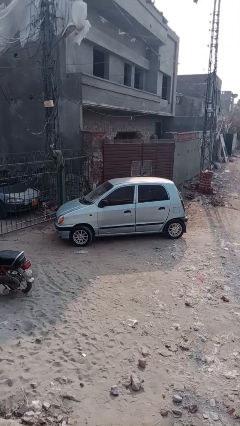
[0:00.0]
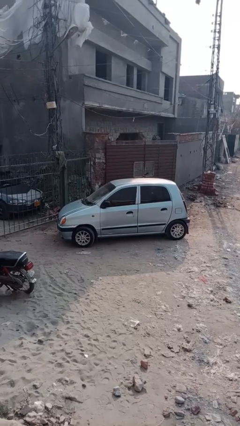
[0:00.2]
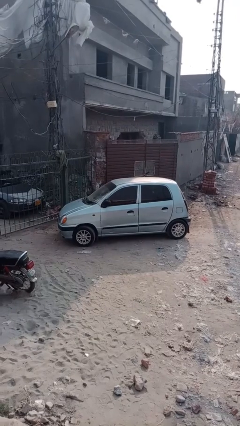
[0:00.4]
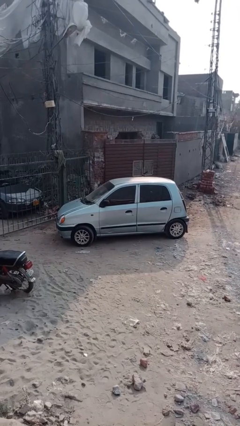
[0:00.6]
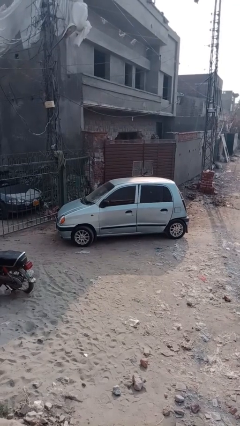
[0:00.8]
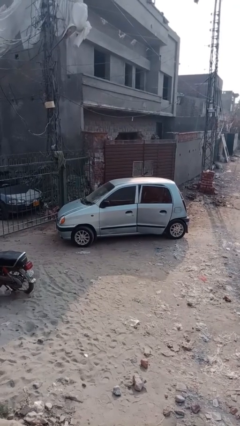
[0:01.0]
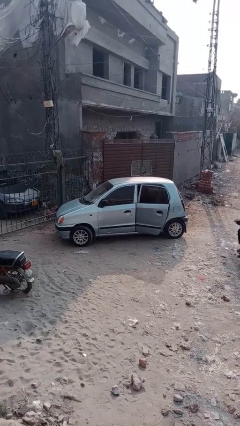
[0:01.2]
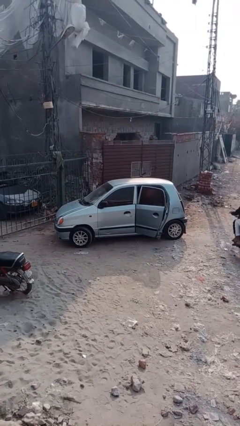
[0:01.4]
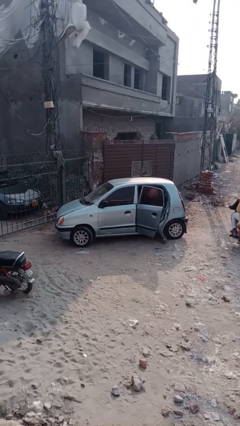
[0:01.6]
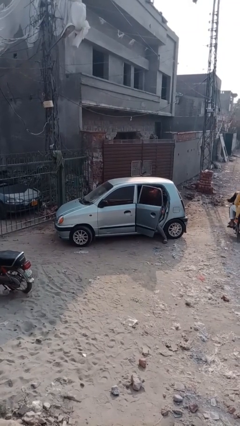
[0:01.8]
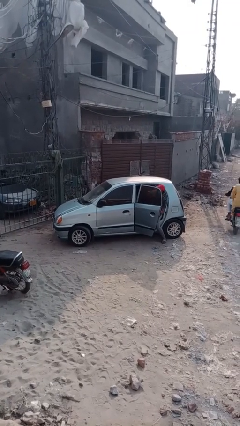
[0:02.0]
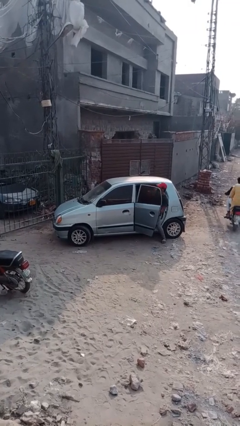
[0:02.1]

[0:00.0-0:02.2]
car drops off person

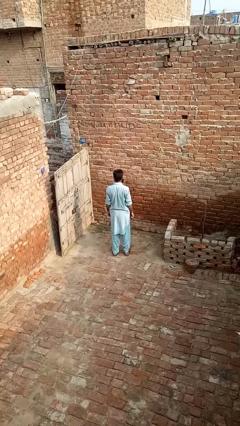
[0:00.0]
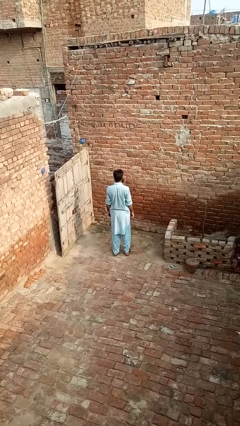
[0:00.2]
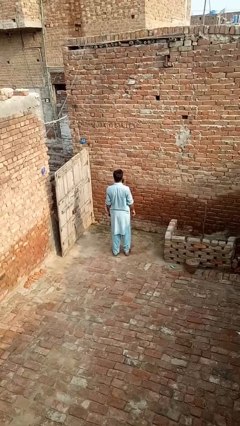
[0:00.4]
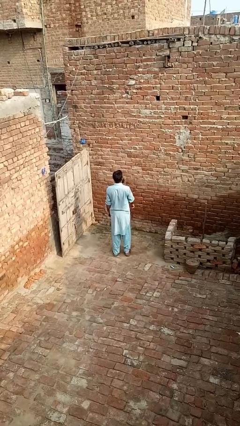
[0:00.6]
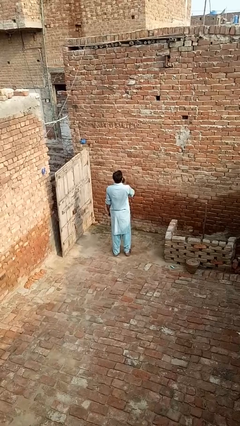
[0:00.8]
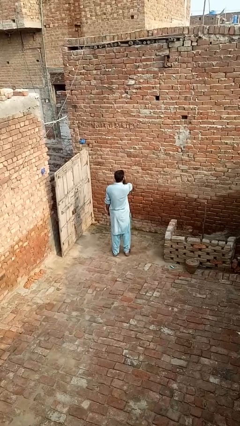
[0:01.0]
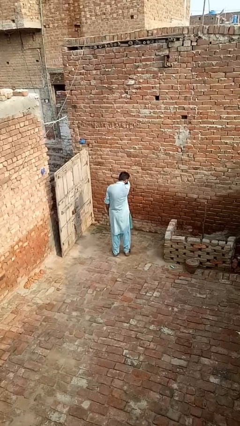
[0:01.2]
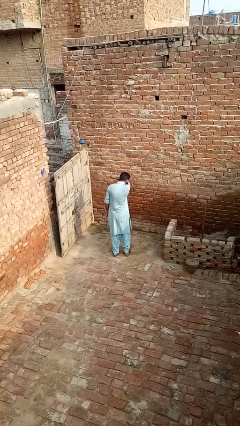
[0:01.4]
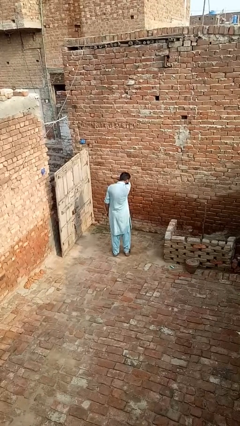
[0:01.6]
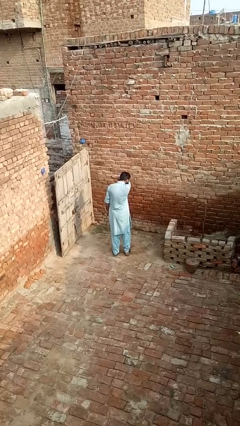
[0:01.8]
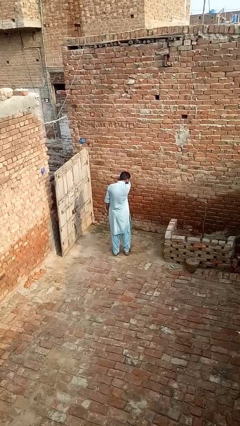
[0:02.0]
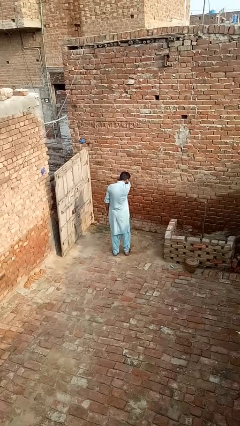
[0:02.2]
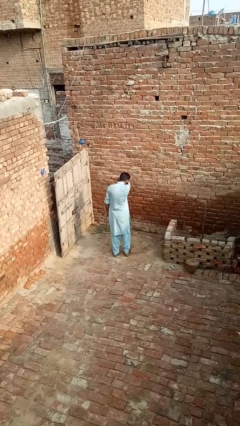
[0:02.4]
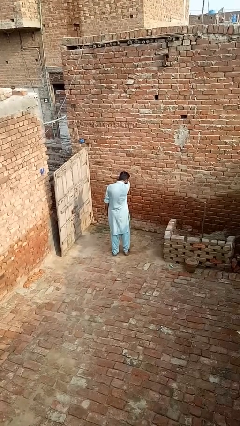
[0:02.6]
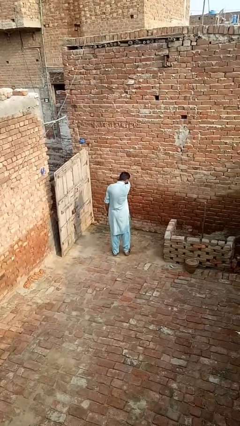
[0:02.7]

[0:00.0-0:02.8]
person sneezes into arm

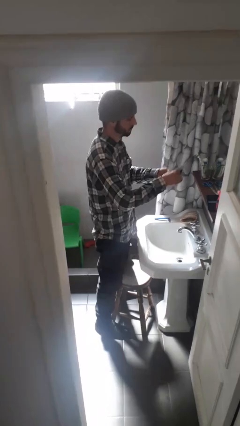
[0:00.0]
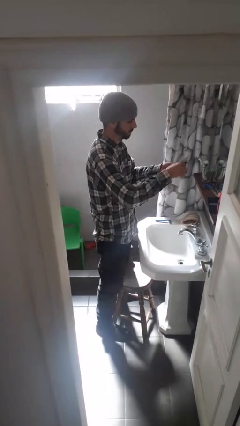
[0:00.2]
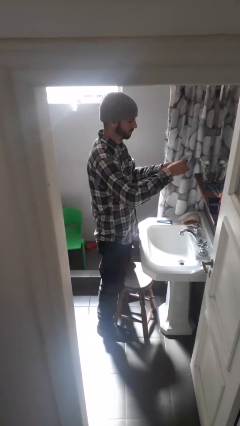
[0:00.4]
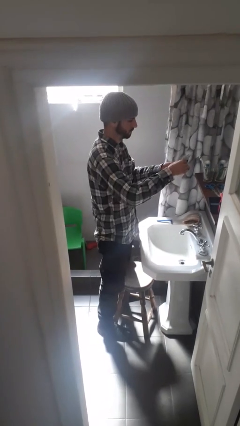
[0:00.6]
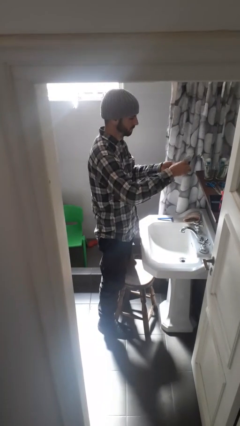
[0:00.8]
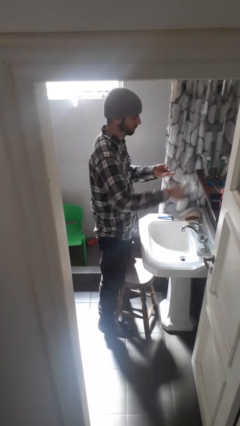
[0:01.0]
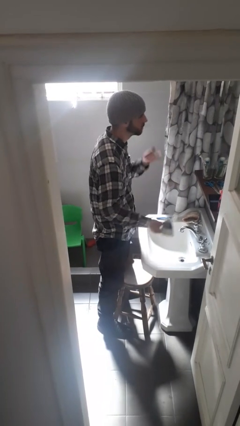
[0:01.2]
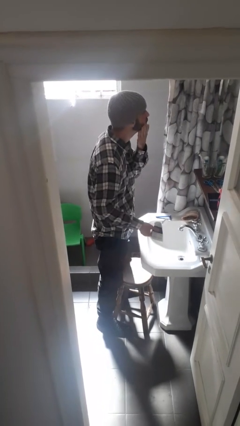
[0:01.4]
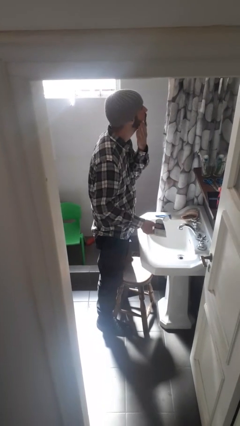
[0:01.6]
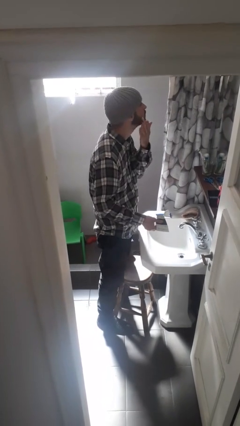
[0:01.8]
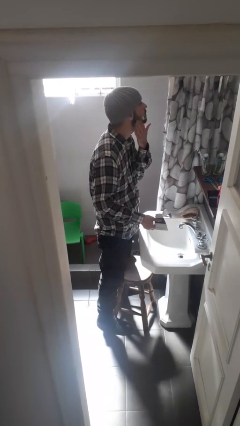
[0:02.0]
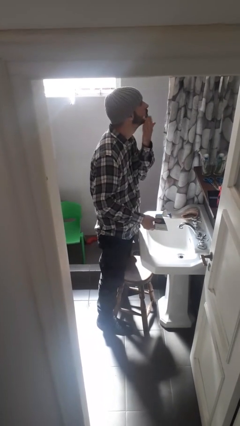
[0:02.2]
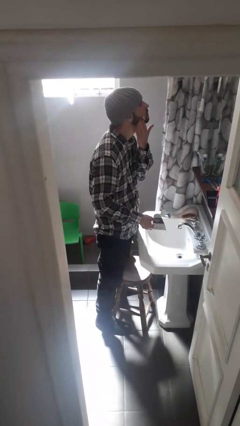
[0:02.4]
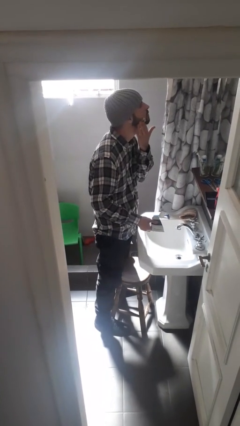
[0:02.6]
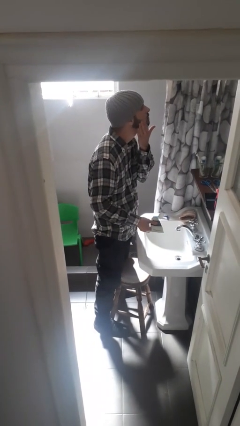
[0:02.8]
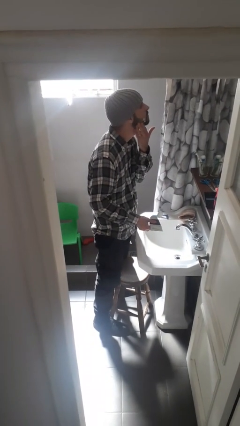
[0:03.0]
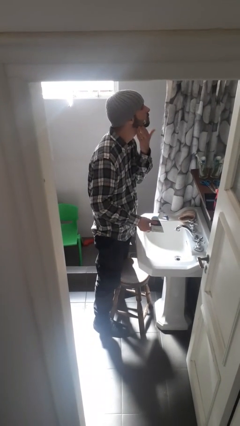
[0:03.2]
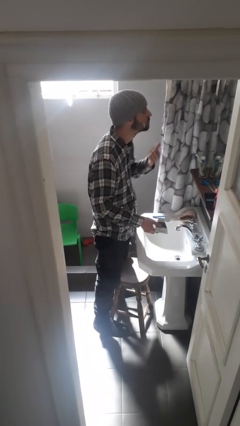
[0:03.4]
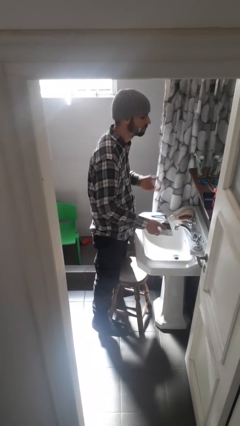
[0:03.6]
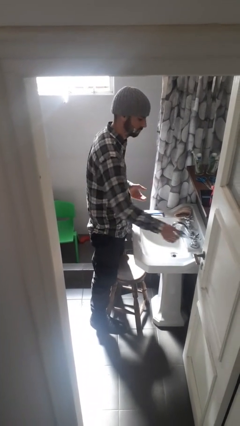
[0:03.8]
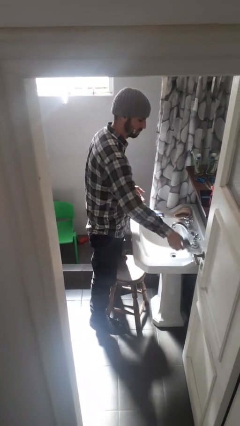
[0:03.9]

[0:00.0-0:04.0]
person applies shaving cream

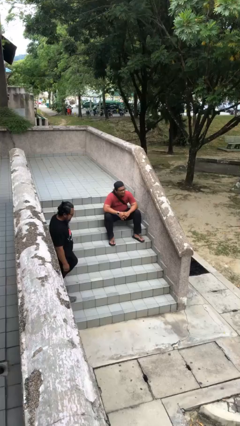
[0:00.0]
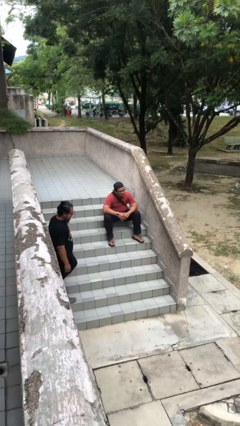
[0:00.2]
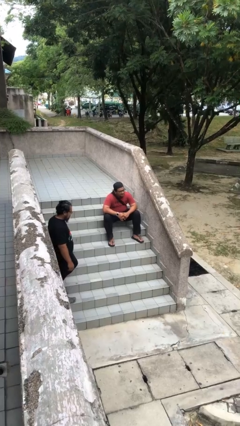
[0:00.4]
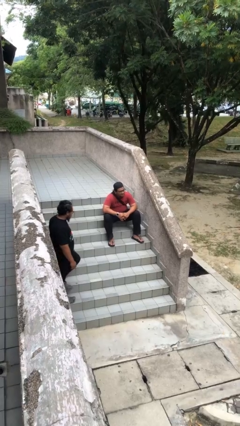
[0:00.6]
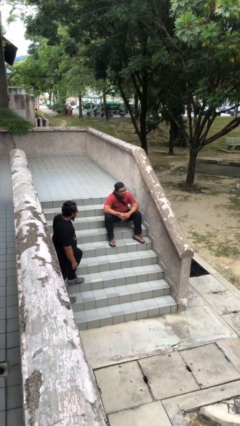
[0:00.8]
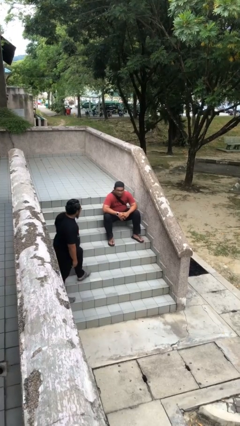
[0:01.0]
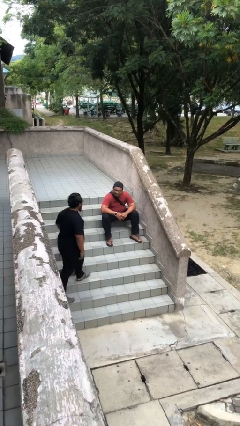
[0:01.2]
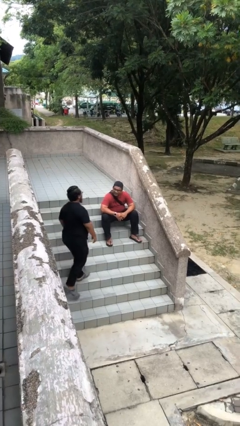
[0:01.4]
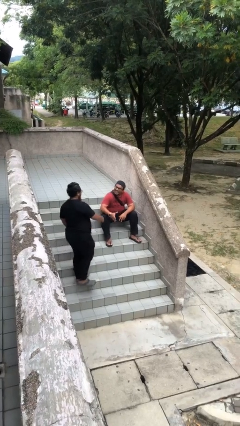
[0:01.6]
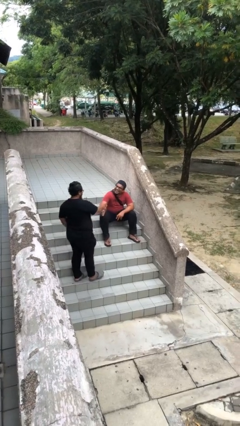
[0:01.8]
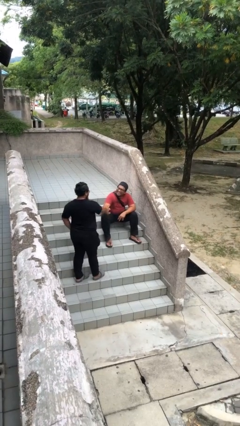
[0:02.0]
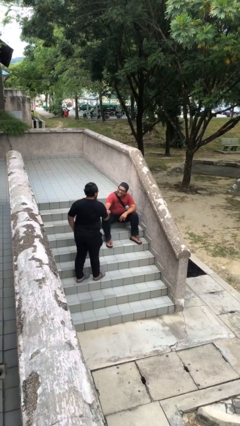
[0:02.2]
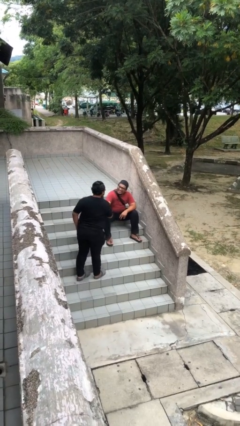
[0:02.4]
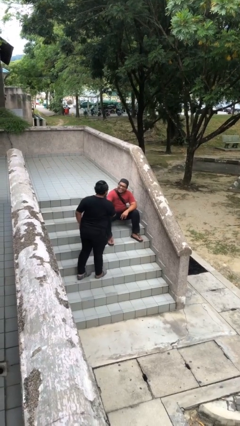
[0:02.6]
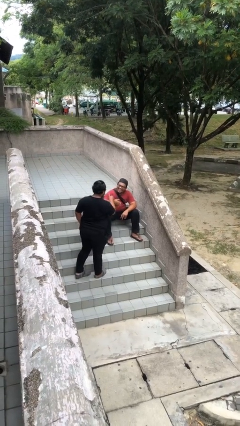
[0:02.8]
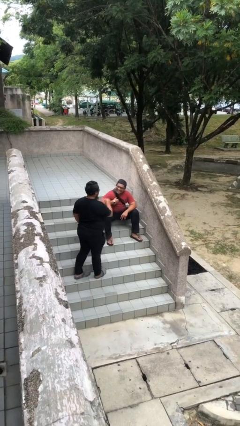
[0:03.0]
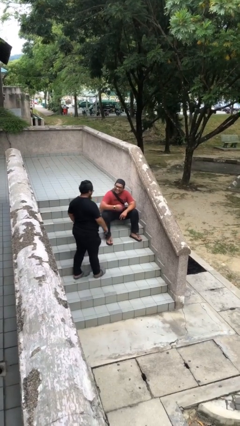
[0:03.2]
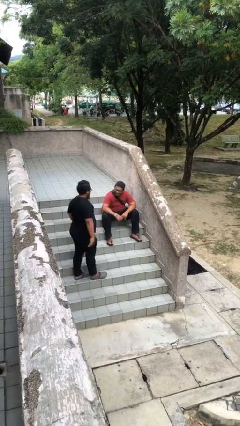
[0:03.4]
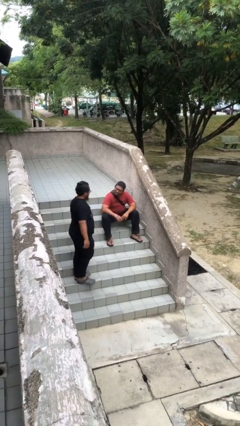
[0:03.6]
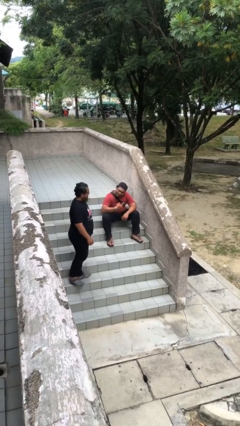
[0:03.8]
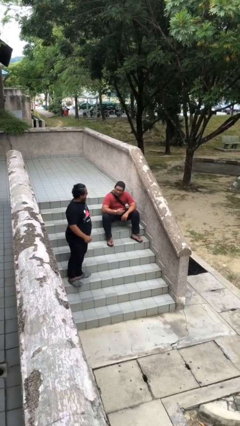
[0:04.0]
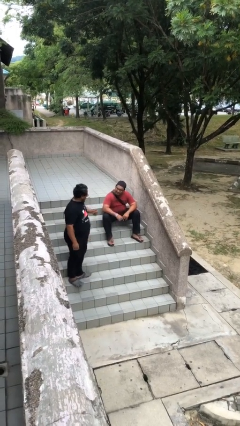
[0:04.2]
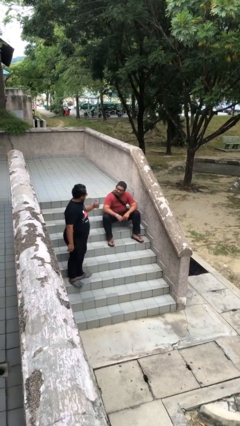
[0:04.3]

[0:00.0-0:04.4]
person shakes hand

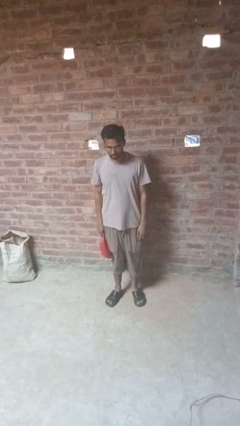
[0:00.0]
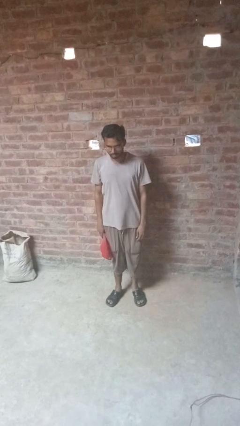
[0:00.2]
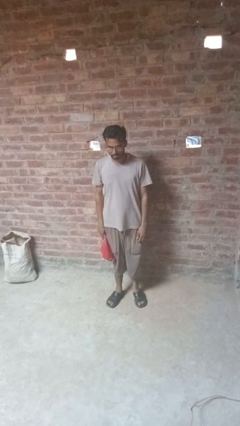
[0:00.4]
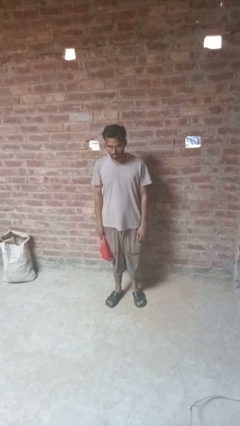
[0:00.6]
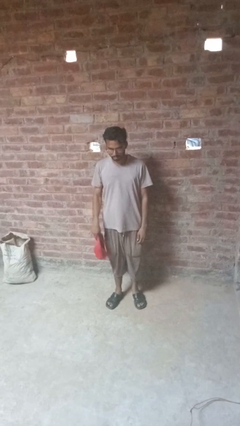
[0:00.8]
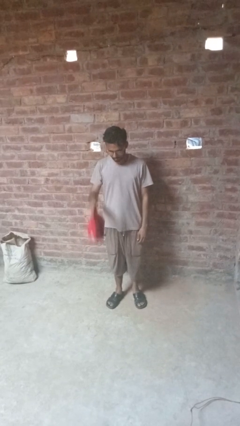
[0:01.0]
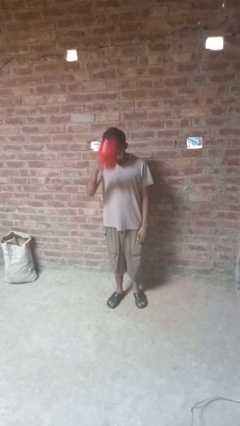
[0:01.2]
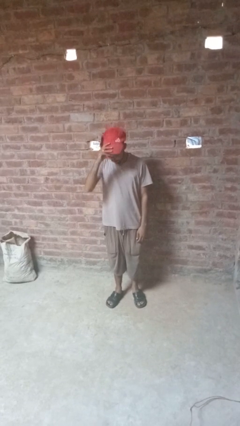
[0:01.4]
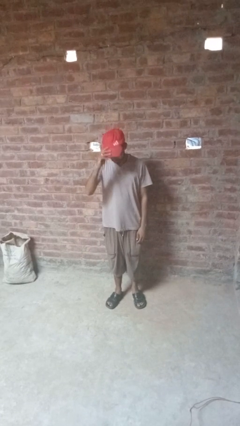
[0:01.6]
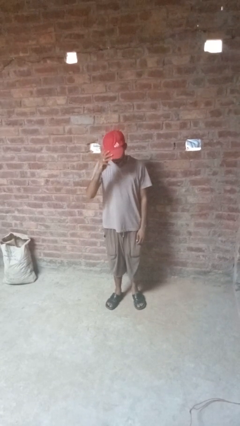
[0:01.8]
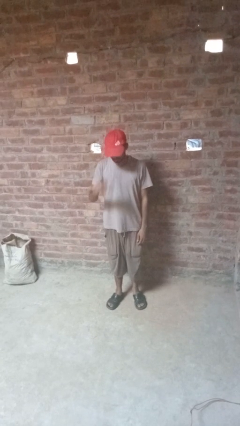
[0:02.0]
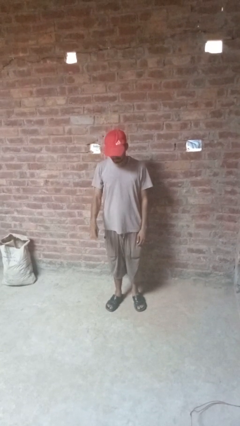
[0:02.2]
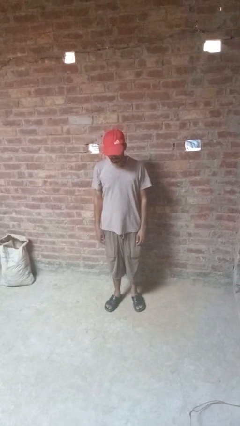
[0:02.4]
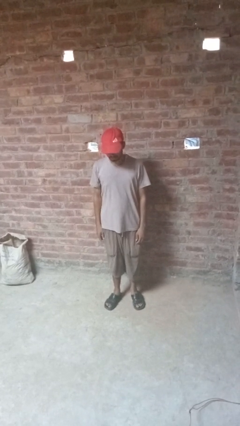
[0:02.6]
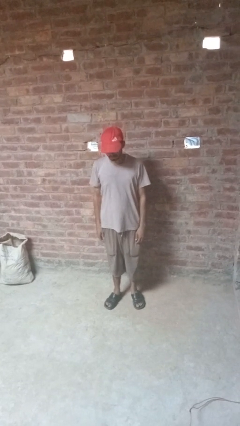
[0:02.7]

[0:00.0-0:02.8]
person puts on hat

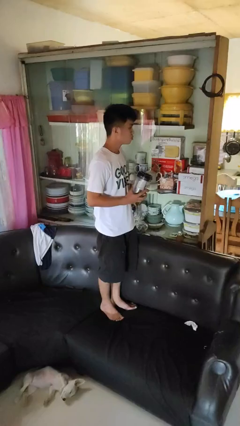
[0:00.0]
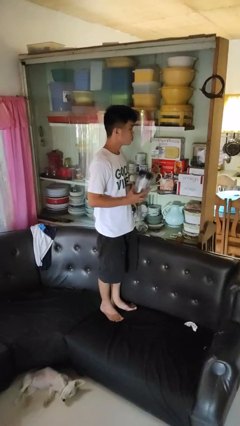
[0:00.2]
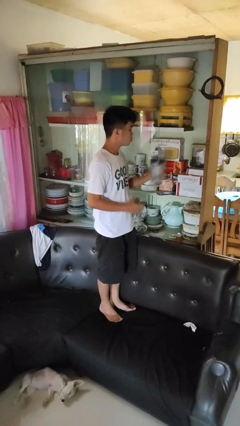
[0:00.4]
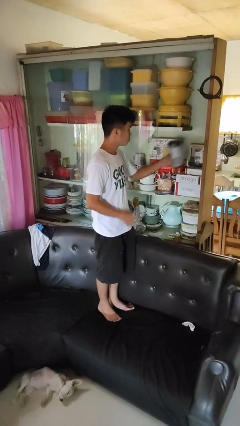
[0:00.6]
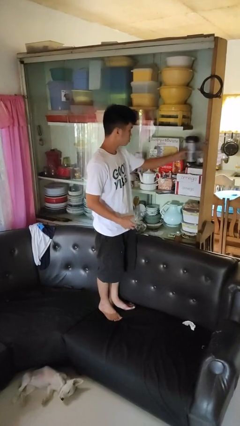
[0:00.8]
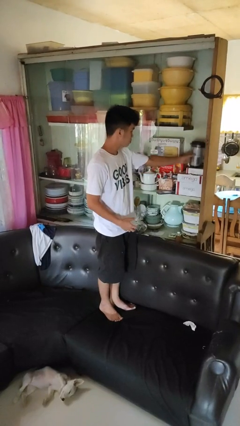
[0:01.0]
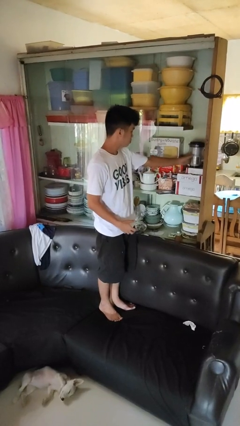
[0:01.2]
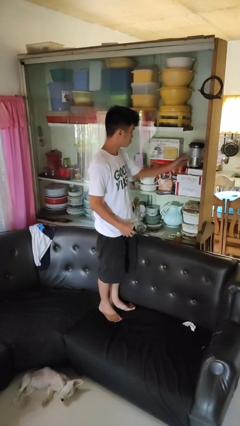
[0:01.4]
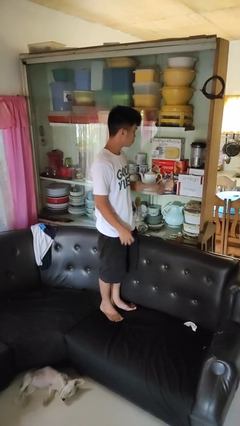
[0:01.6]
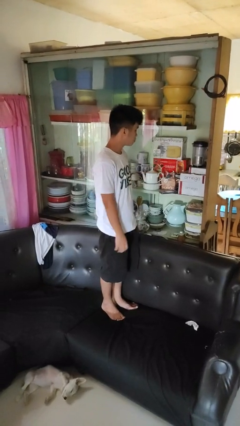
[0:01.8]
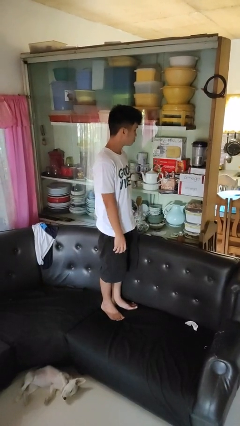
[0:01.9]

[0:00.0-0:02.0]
person puts down object into cabinet
